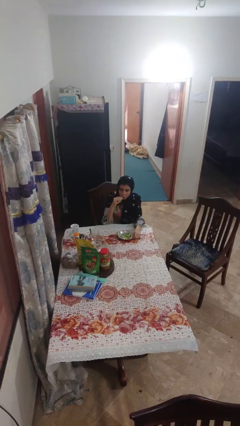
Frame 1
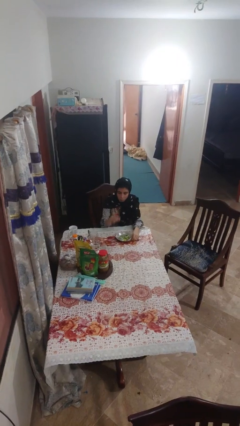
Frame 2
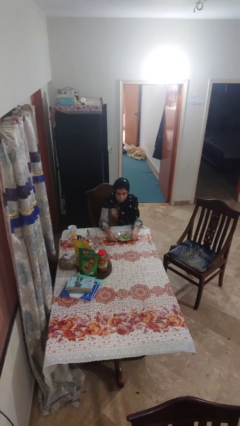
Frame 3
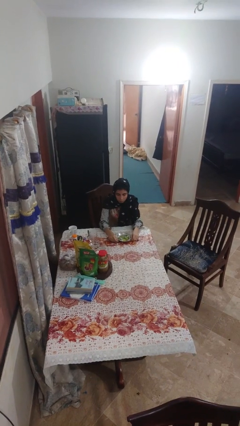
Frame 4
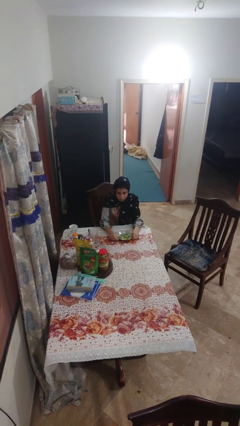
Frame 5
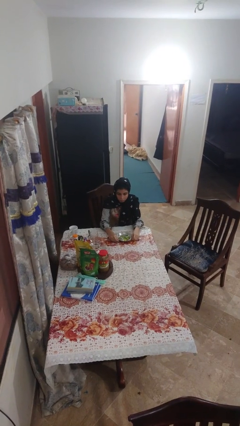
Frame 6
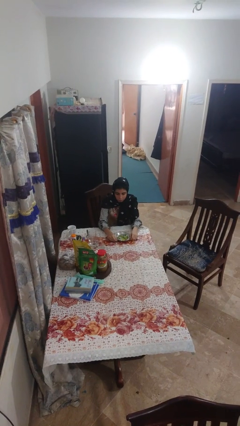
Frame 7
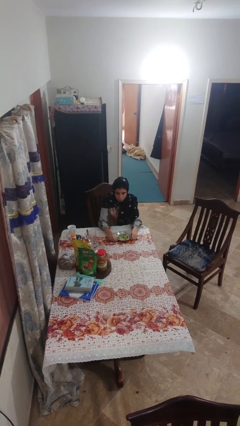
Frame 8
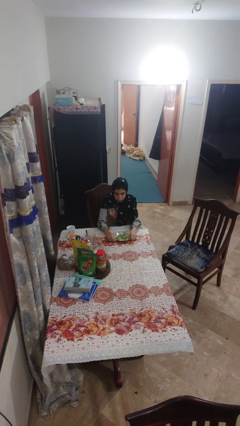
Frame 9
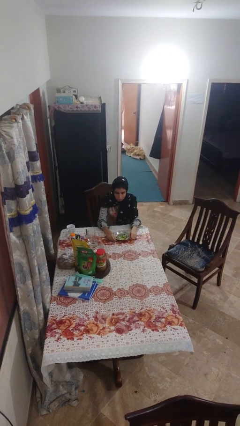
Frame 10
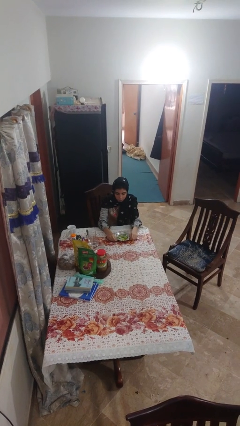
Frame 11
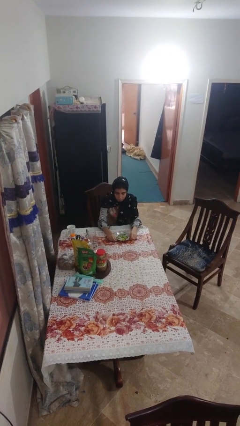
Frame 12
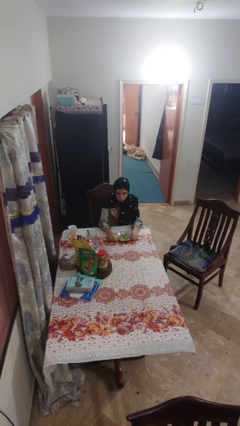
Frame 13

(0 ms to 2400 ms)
person eats with hands

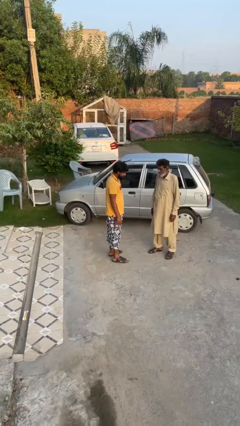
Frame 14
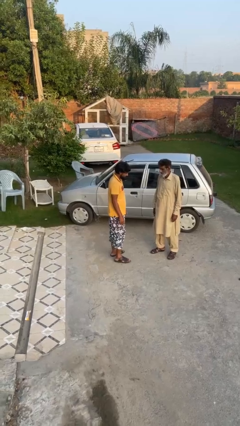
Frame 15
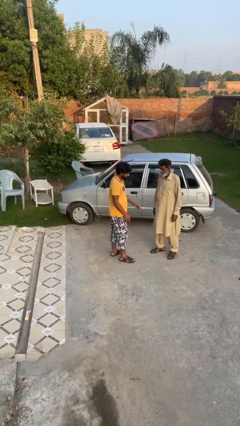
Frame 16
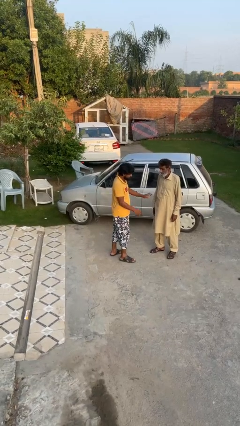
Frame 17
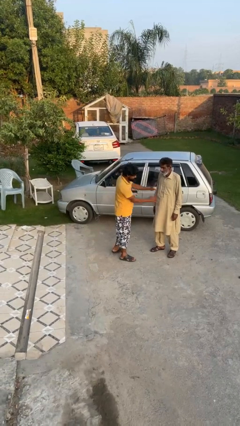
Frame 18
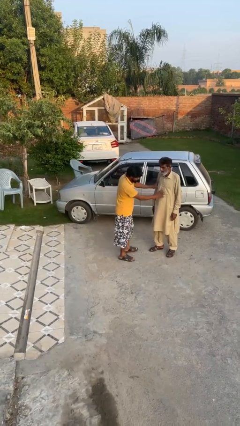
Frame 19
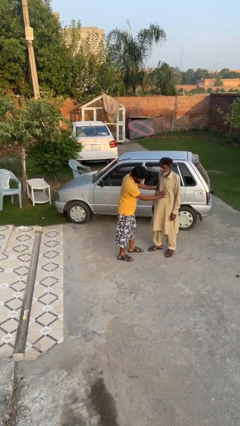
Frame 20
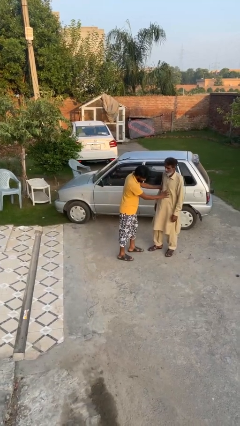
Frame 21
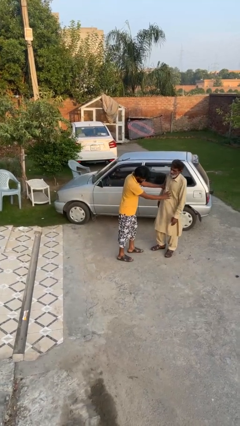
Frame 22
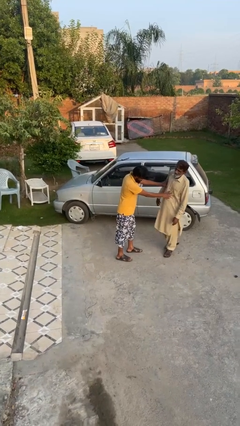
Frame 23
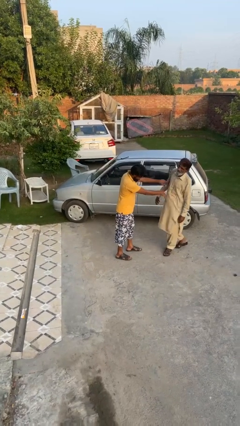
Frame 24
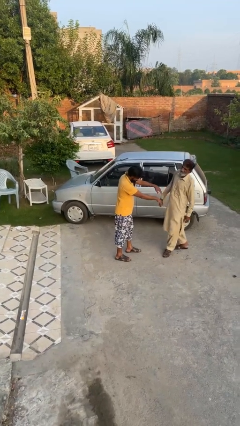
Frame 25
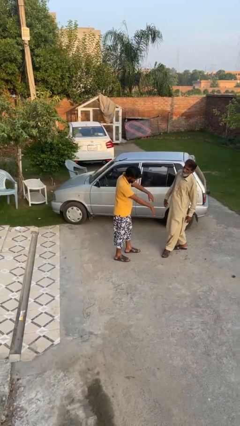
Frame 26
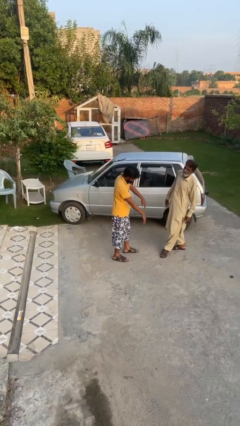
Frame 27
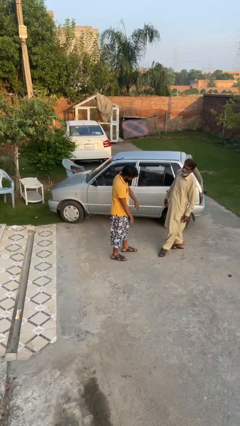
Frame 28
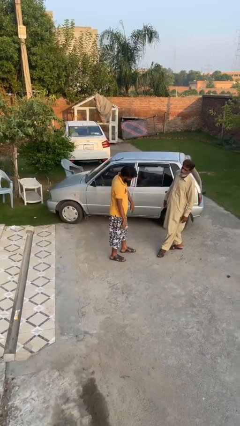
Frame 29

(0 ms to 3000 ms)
person shoves person

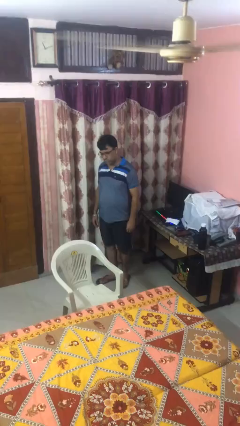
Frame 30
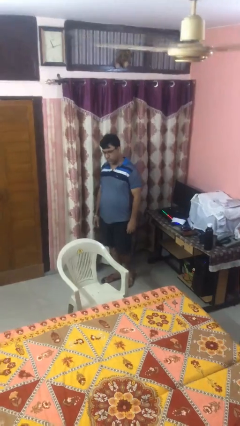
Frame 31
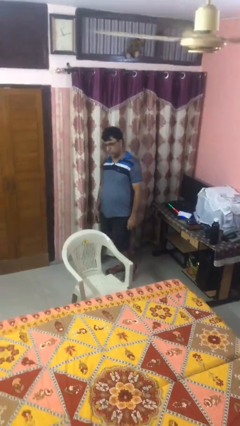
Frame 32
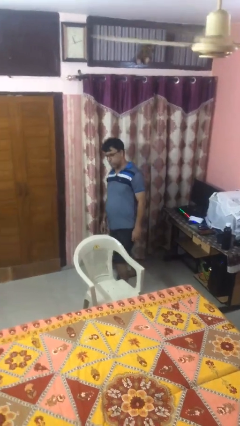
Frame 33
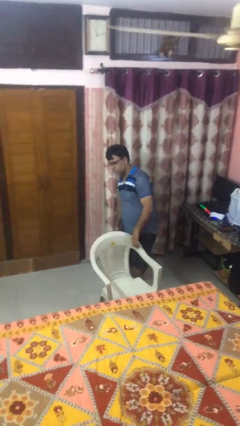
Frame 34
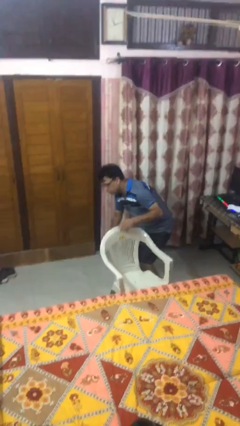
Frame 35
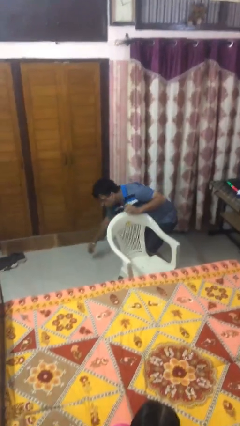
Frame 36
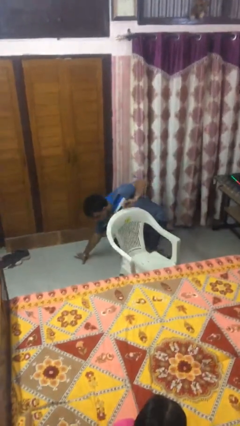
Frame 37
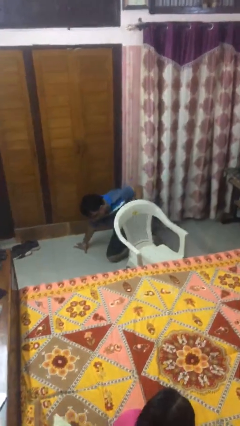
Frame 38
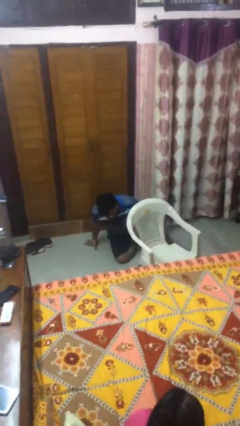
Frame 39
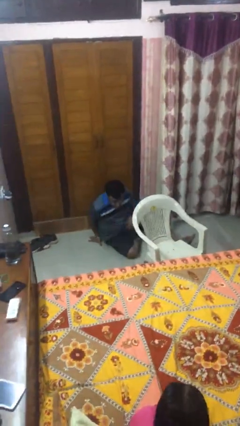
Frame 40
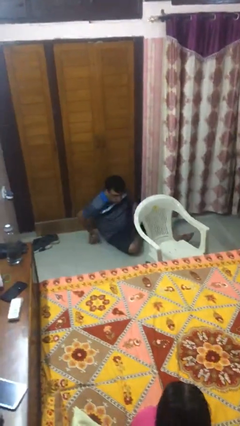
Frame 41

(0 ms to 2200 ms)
person trips on object on floor

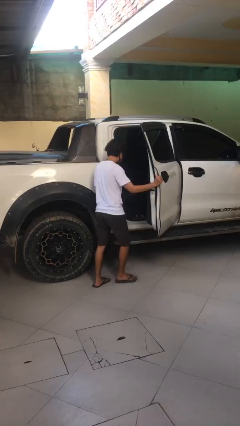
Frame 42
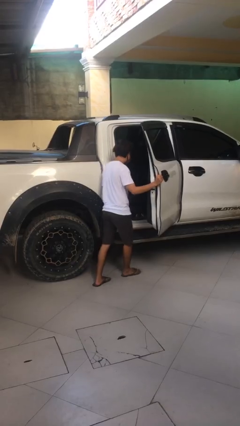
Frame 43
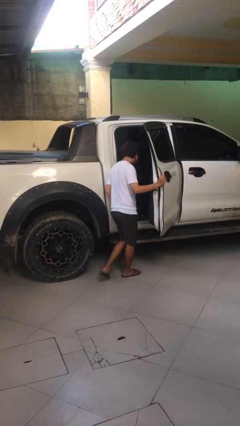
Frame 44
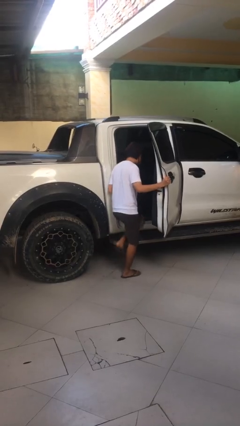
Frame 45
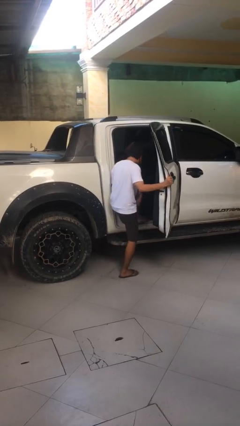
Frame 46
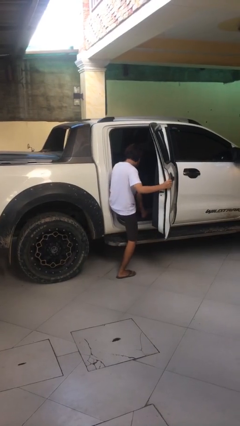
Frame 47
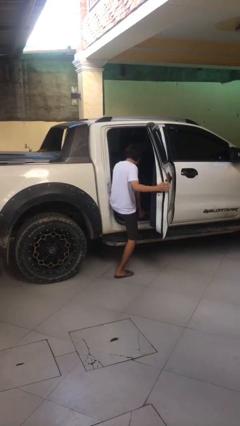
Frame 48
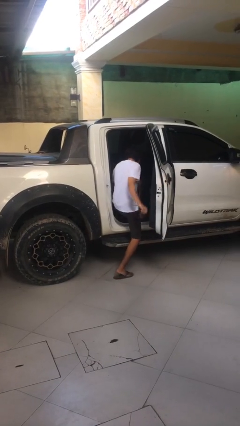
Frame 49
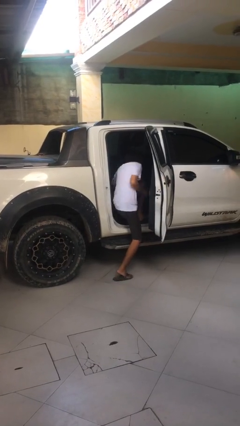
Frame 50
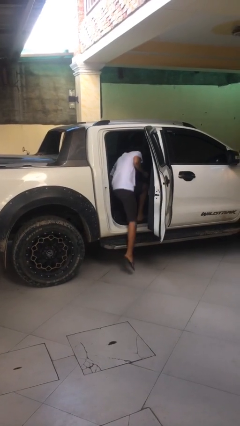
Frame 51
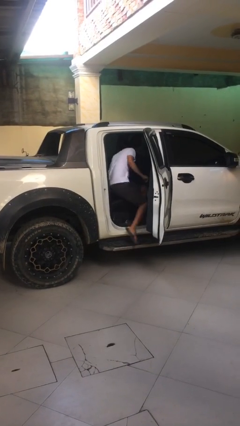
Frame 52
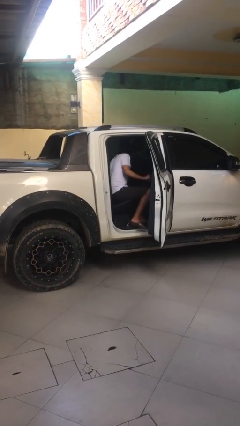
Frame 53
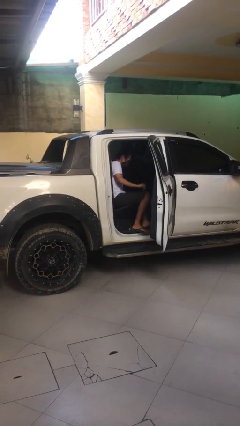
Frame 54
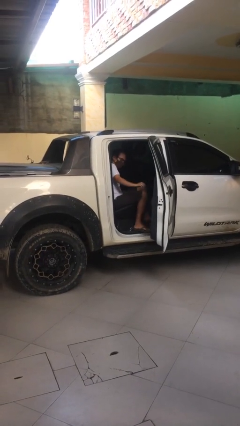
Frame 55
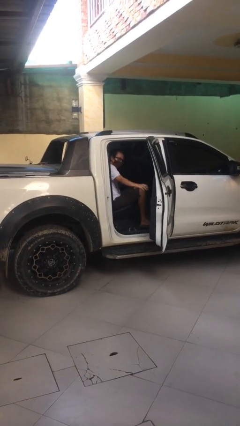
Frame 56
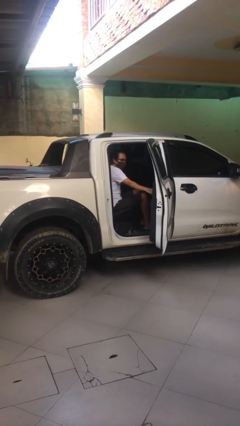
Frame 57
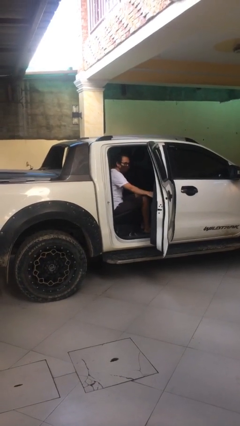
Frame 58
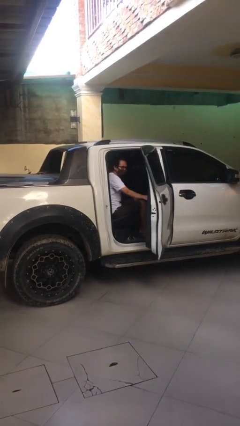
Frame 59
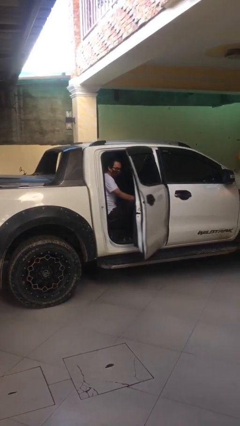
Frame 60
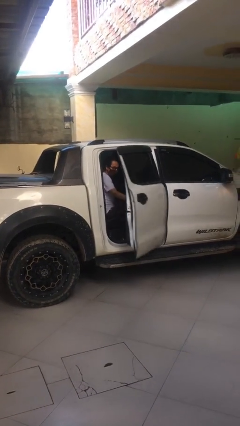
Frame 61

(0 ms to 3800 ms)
person enters car

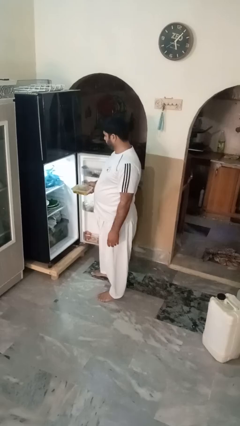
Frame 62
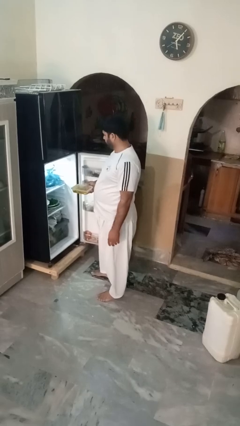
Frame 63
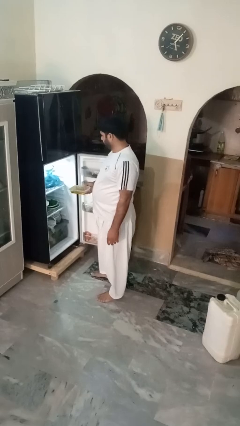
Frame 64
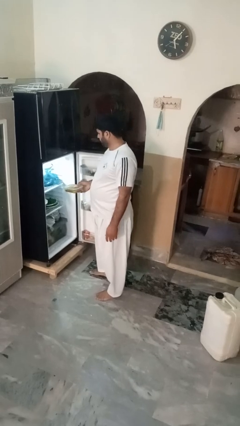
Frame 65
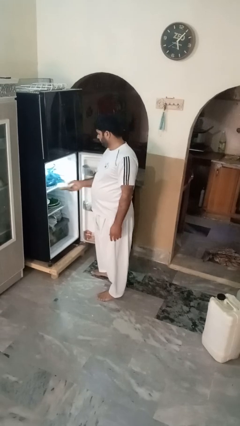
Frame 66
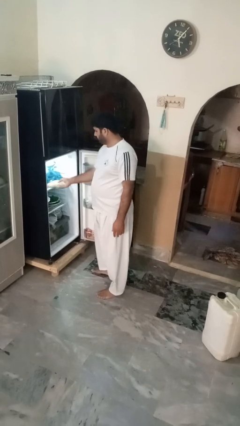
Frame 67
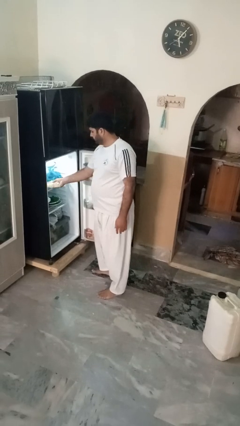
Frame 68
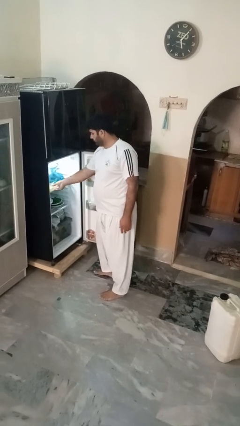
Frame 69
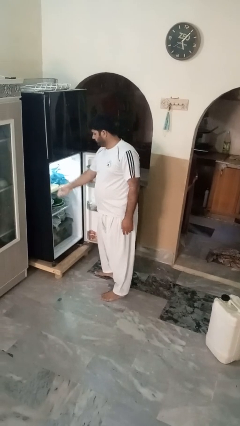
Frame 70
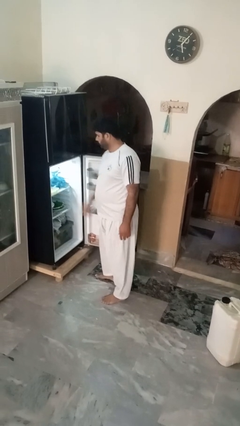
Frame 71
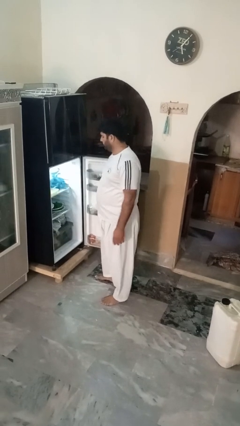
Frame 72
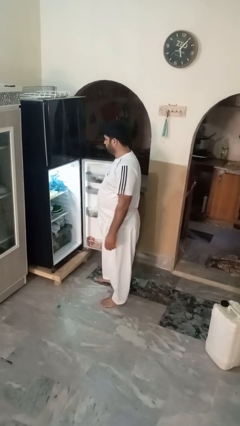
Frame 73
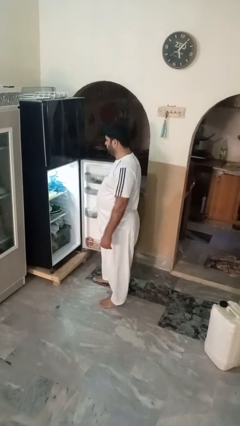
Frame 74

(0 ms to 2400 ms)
person puts object into refrigerator

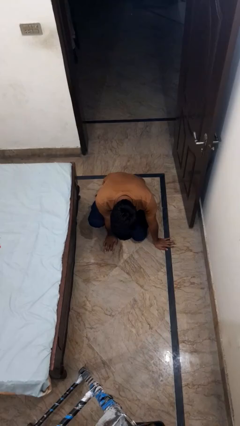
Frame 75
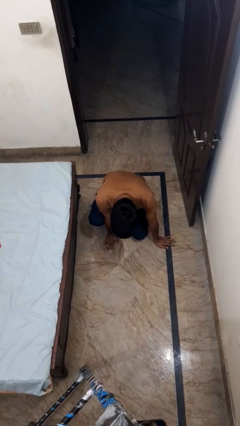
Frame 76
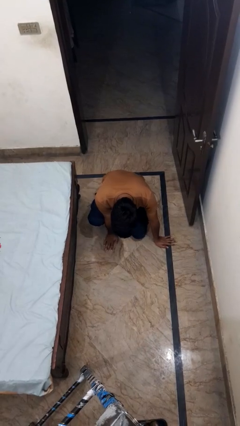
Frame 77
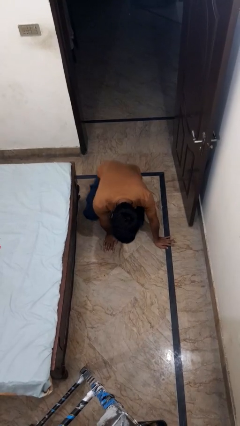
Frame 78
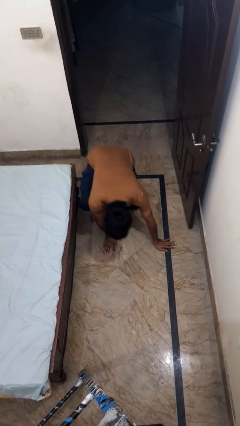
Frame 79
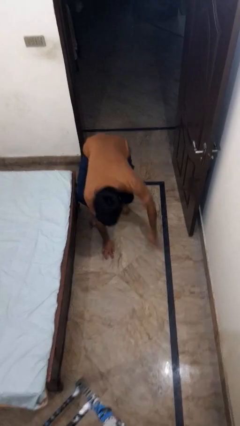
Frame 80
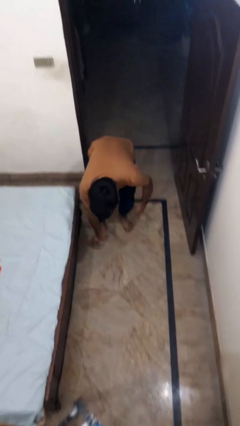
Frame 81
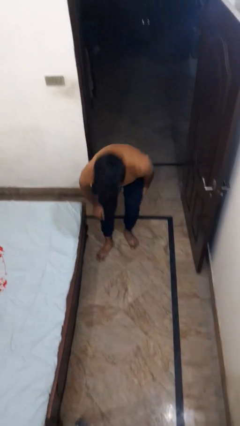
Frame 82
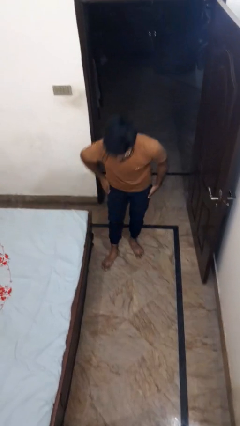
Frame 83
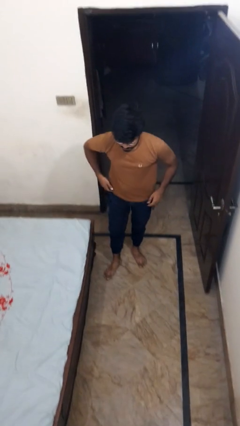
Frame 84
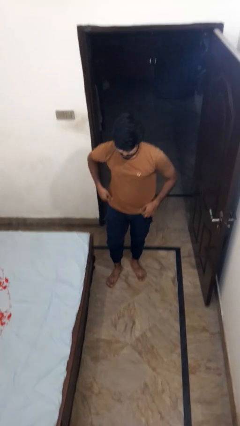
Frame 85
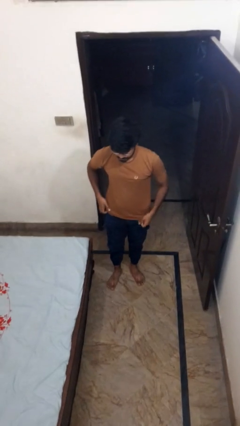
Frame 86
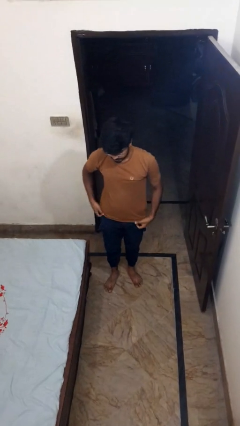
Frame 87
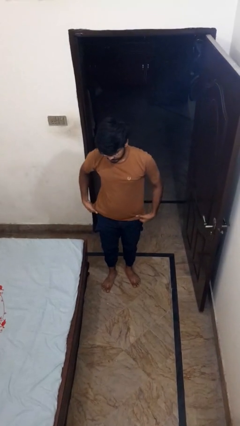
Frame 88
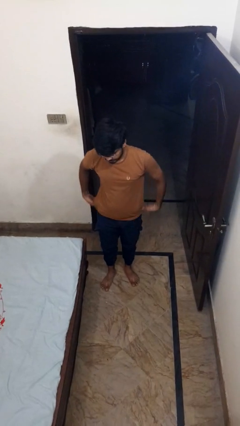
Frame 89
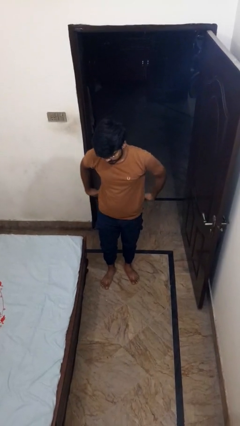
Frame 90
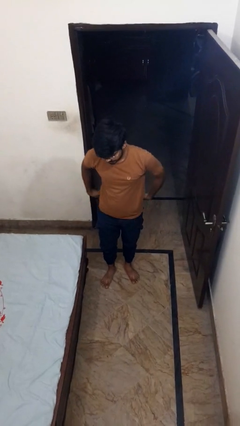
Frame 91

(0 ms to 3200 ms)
person stands up from floor

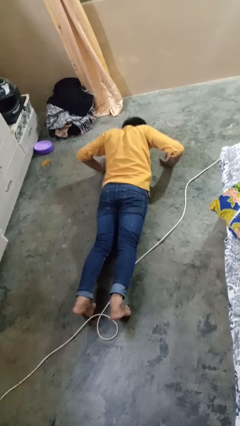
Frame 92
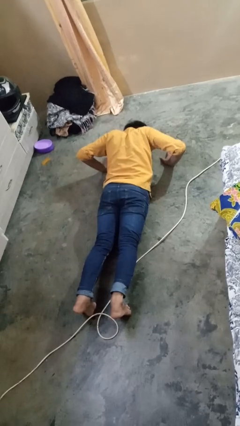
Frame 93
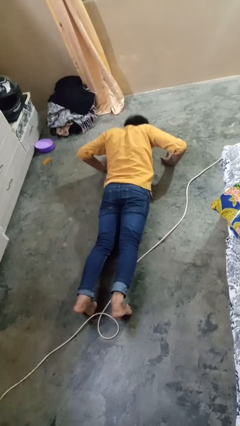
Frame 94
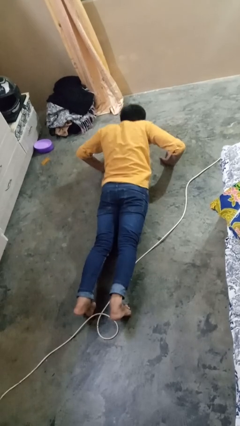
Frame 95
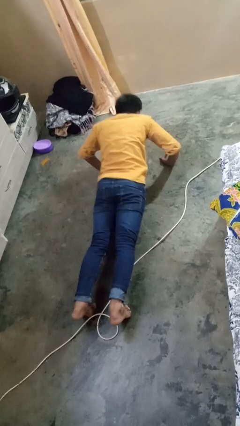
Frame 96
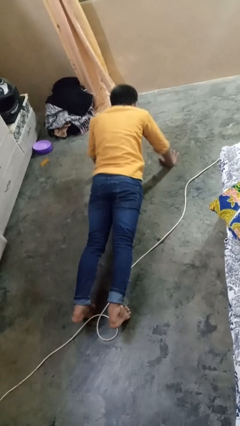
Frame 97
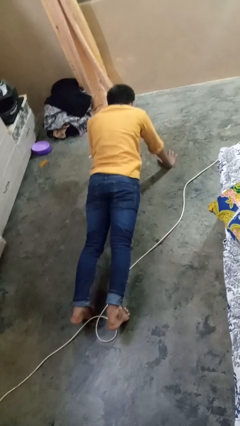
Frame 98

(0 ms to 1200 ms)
person exercises with pushup
